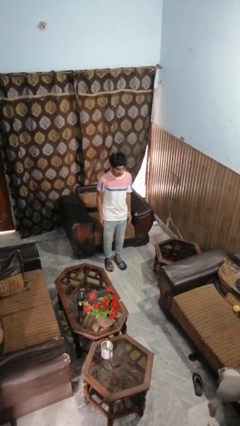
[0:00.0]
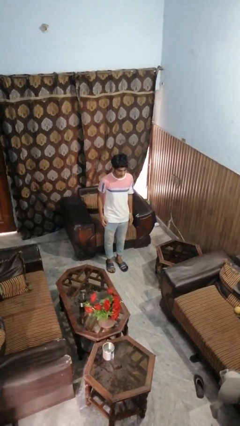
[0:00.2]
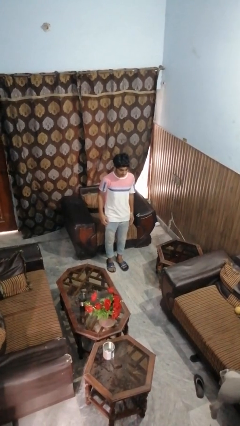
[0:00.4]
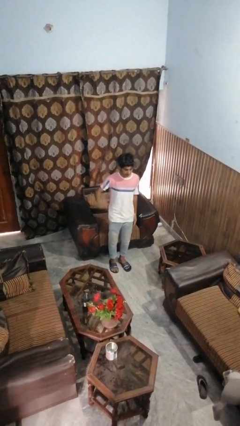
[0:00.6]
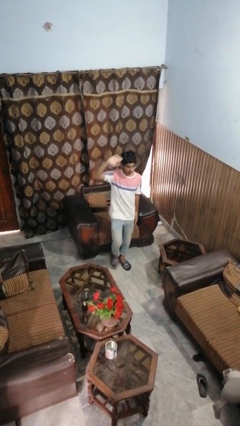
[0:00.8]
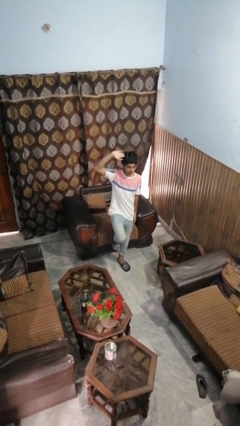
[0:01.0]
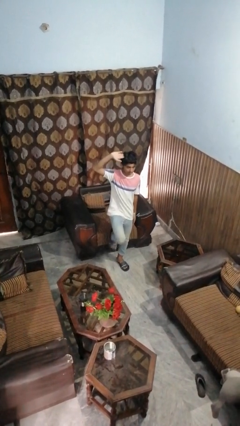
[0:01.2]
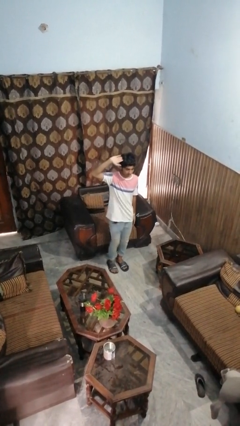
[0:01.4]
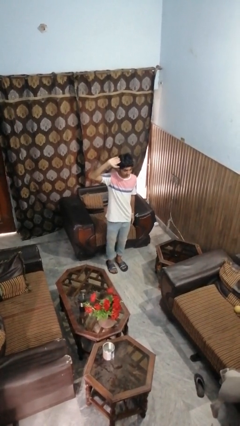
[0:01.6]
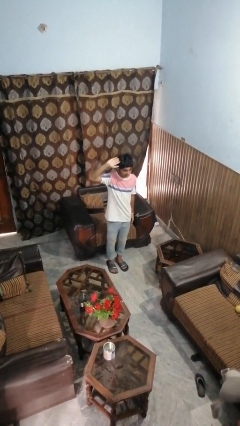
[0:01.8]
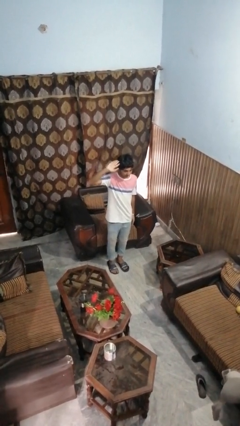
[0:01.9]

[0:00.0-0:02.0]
person salutes

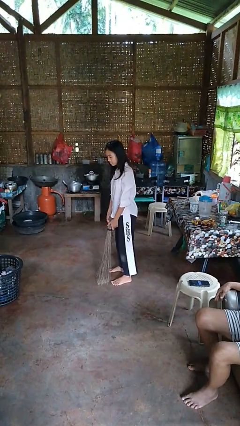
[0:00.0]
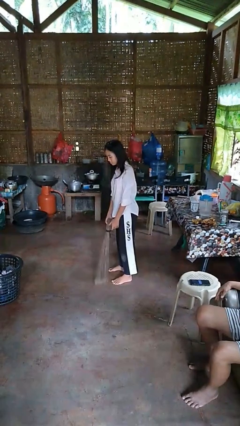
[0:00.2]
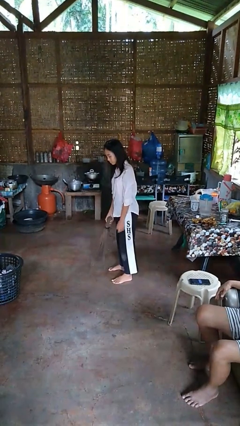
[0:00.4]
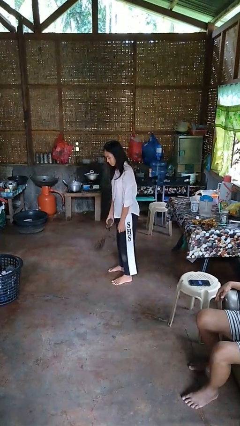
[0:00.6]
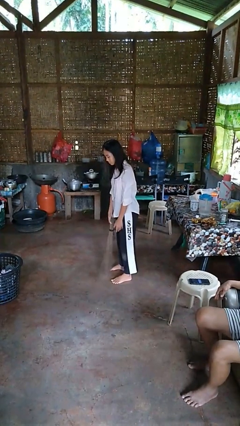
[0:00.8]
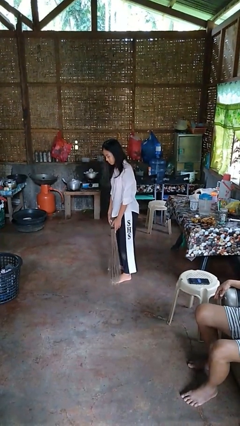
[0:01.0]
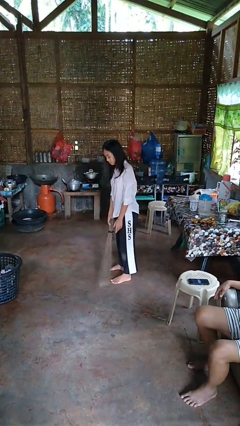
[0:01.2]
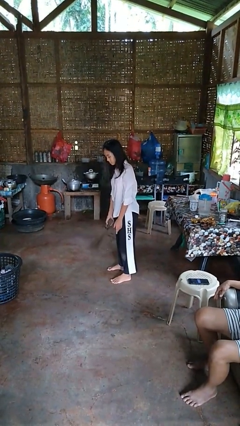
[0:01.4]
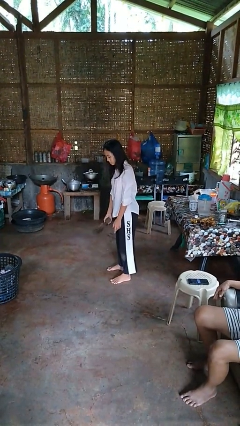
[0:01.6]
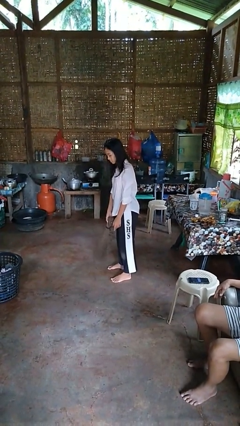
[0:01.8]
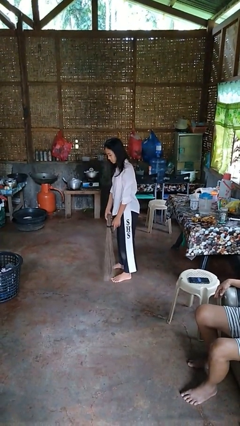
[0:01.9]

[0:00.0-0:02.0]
person sweeps floor

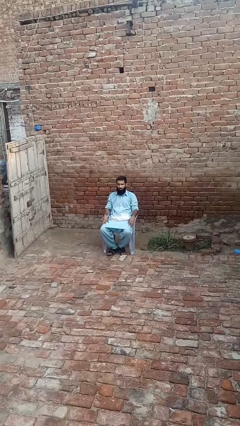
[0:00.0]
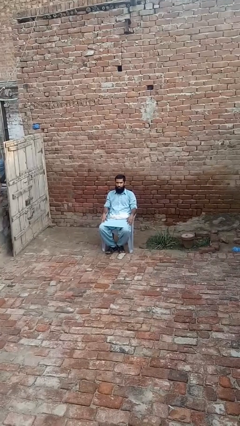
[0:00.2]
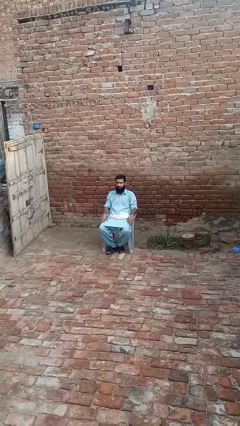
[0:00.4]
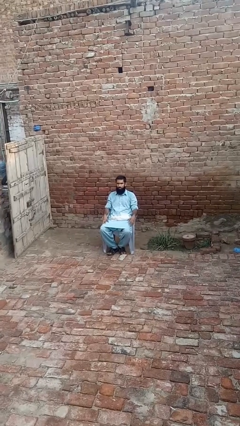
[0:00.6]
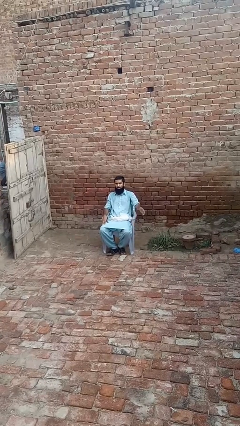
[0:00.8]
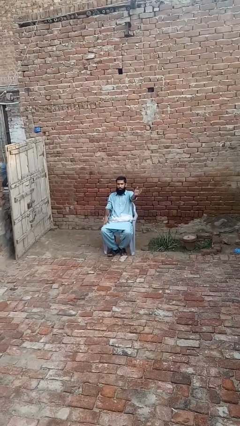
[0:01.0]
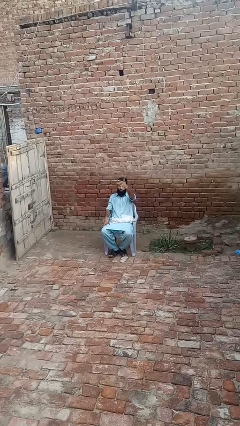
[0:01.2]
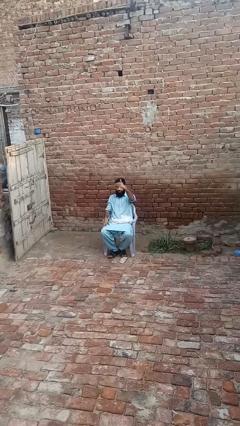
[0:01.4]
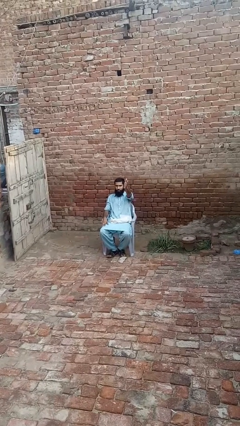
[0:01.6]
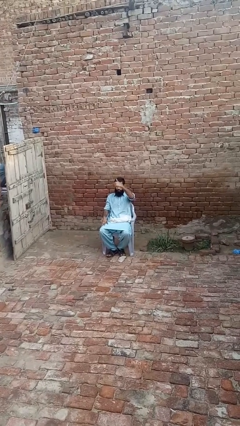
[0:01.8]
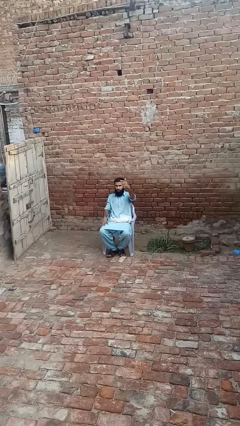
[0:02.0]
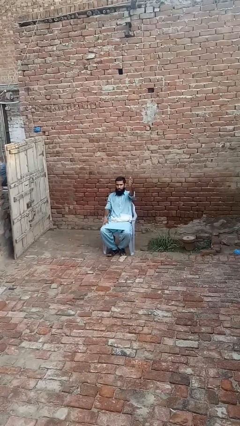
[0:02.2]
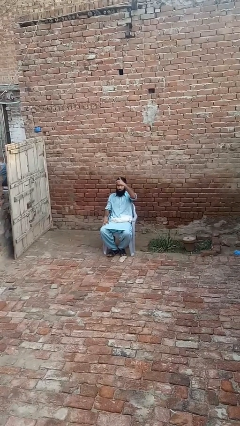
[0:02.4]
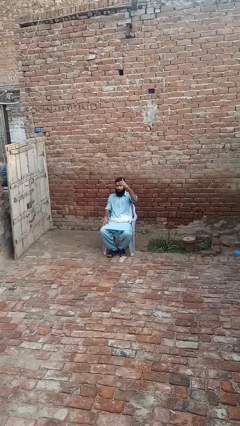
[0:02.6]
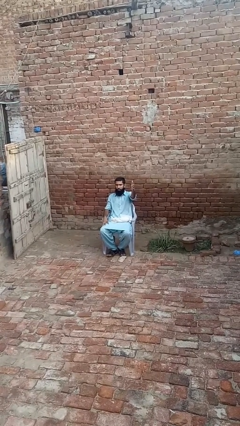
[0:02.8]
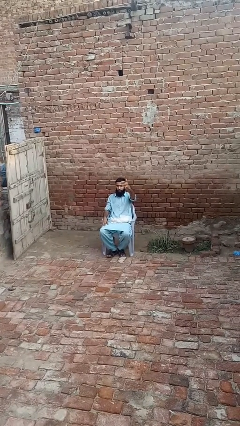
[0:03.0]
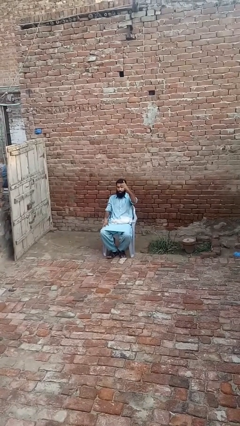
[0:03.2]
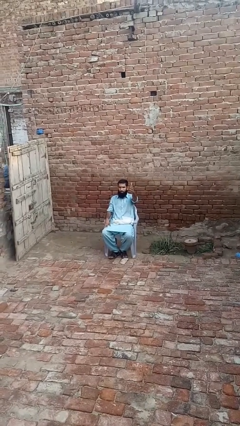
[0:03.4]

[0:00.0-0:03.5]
person gestures come here

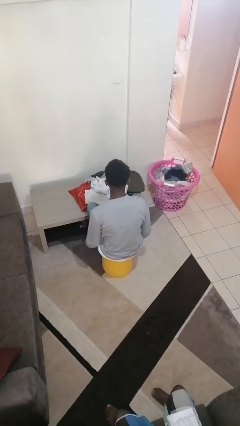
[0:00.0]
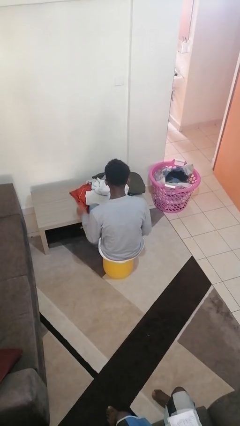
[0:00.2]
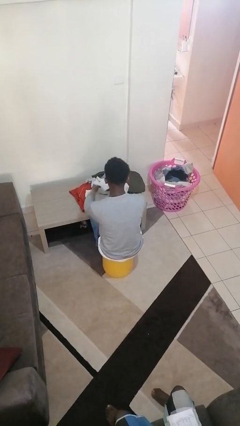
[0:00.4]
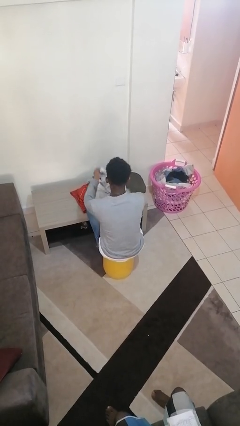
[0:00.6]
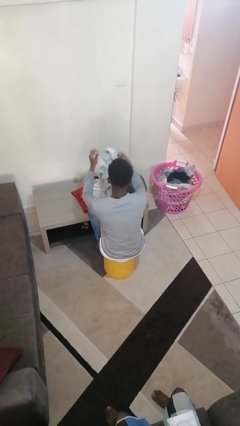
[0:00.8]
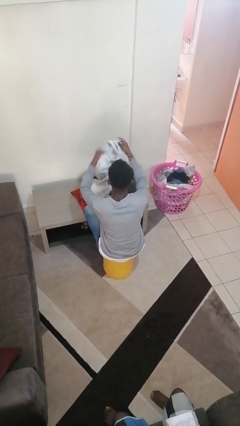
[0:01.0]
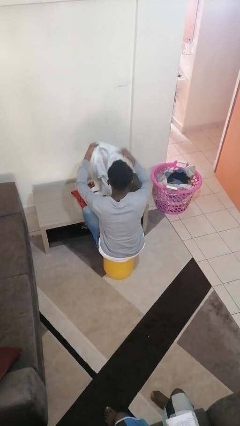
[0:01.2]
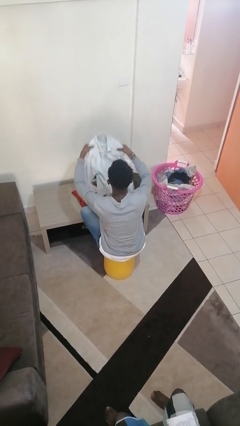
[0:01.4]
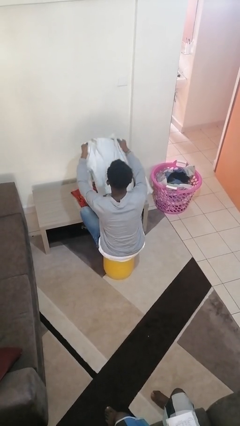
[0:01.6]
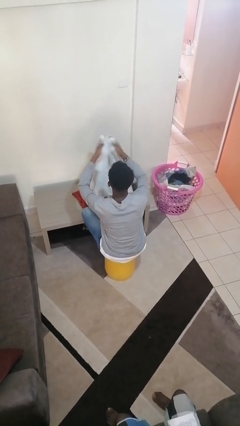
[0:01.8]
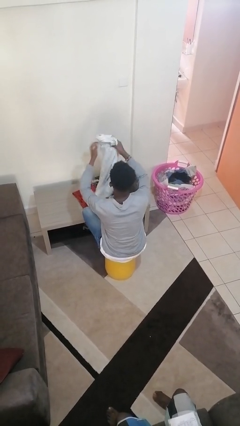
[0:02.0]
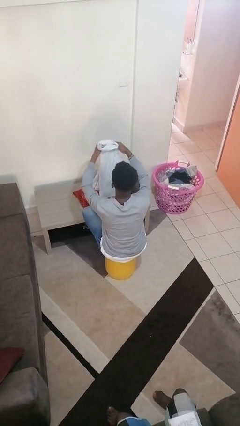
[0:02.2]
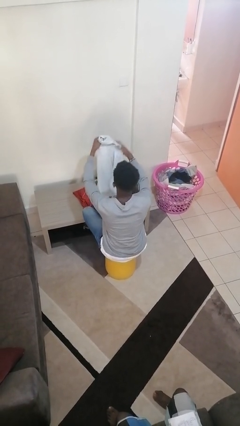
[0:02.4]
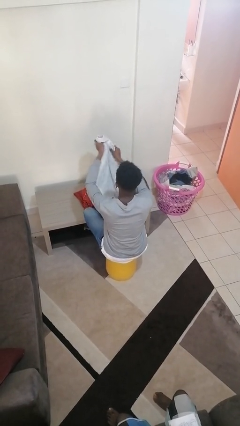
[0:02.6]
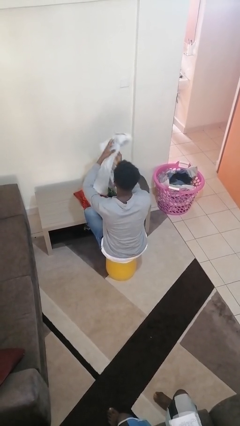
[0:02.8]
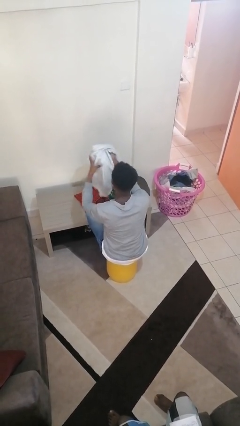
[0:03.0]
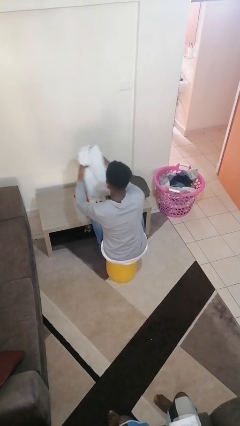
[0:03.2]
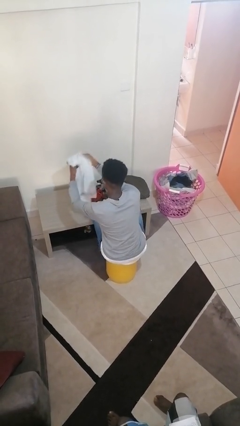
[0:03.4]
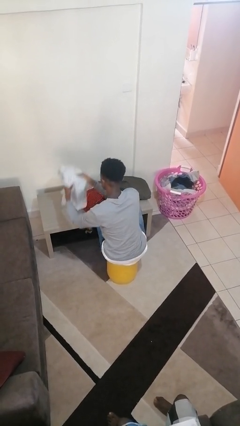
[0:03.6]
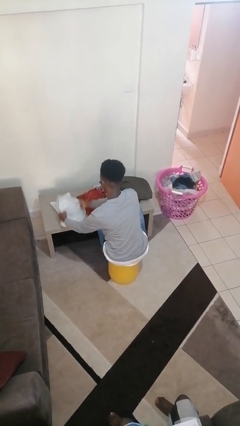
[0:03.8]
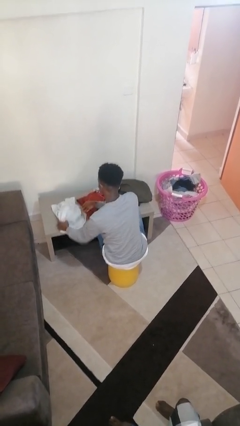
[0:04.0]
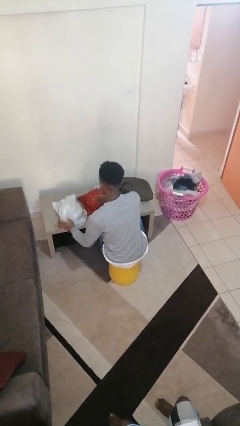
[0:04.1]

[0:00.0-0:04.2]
person folds shirt

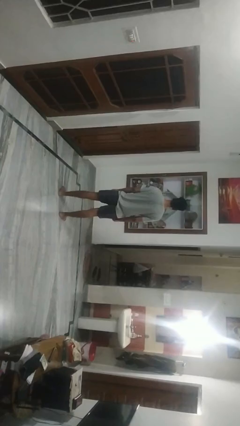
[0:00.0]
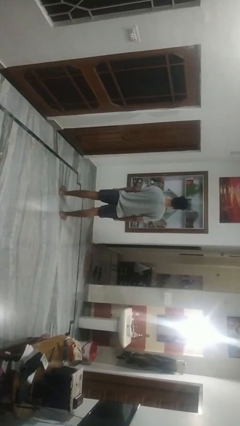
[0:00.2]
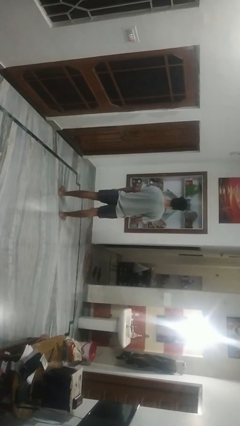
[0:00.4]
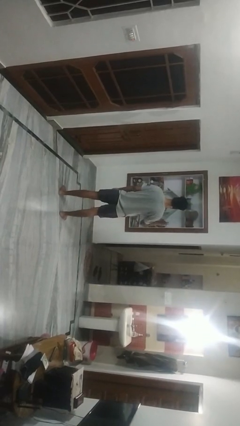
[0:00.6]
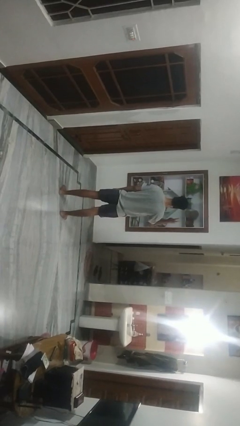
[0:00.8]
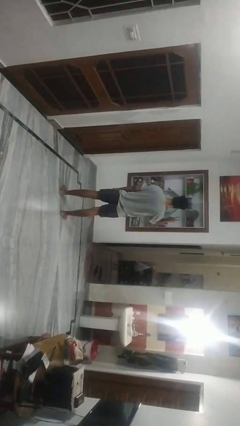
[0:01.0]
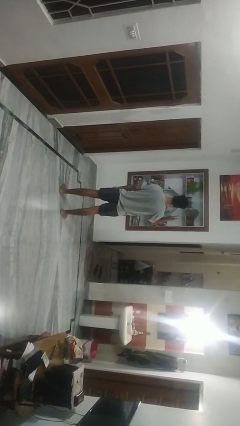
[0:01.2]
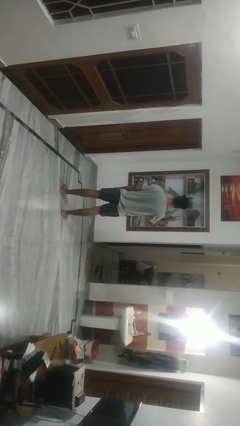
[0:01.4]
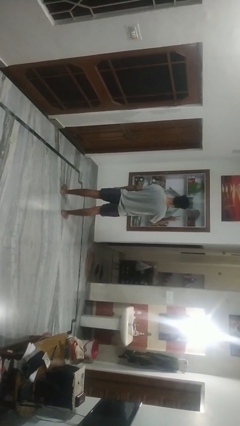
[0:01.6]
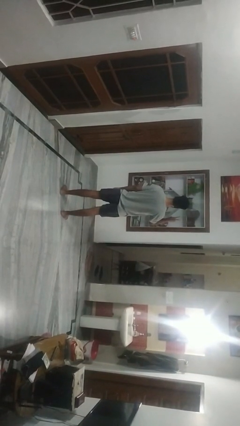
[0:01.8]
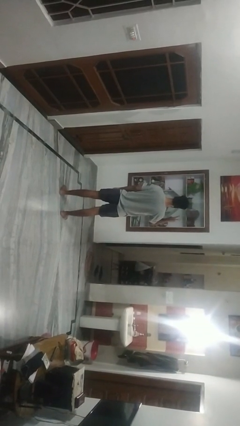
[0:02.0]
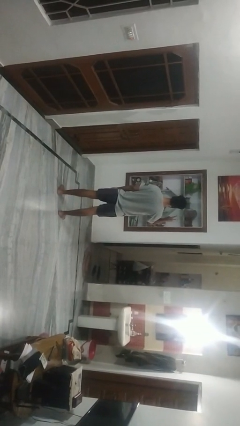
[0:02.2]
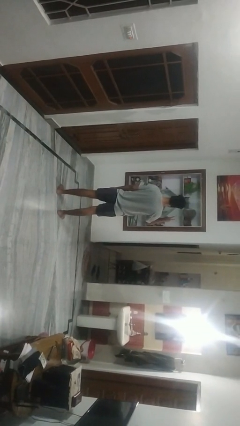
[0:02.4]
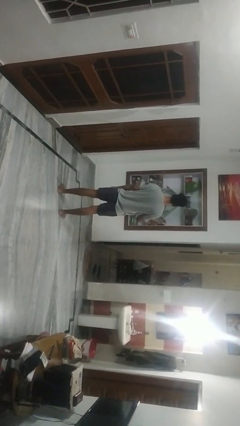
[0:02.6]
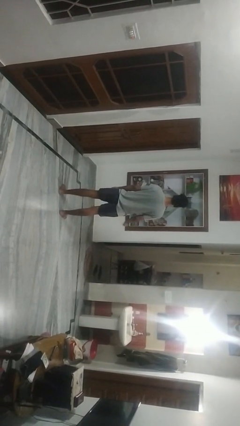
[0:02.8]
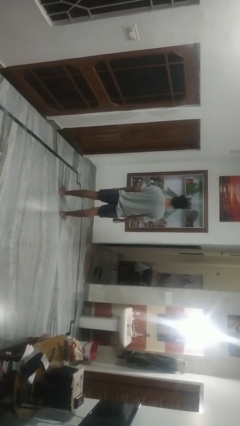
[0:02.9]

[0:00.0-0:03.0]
person gestures peace

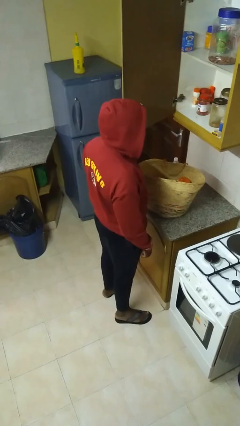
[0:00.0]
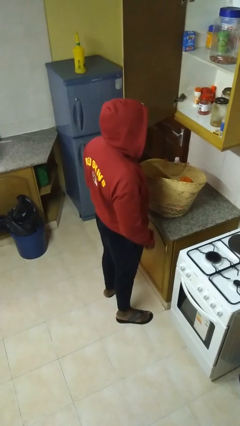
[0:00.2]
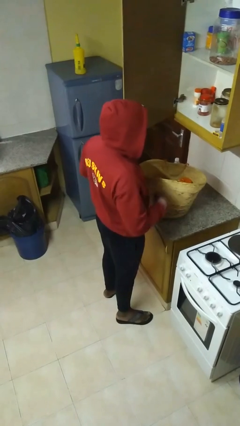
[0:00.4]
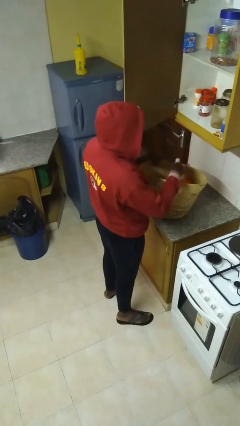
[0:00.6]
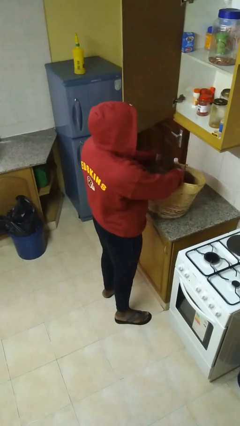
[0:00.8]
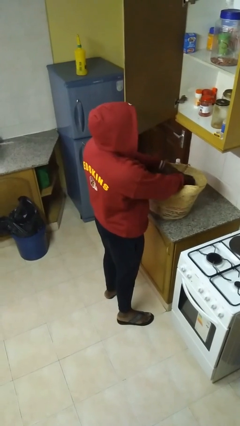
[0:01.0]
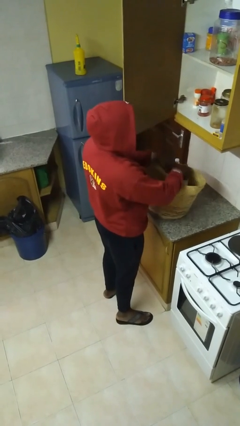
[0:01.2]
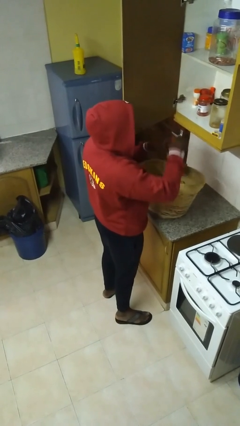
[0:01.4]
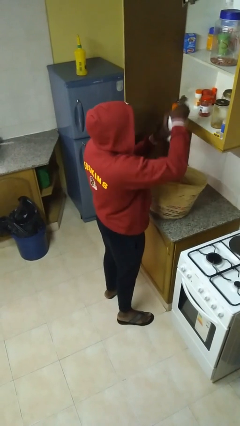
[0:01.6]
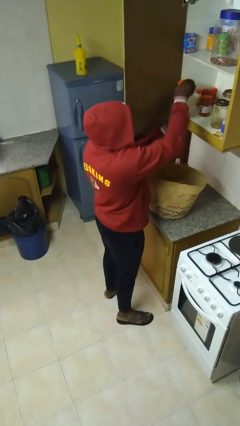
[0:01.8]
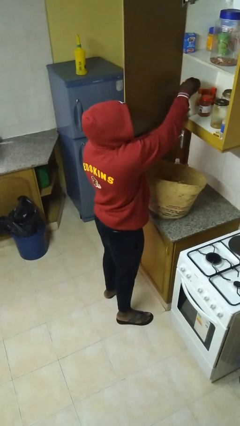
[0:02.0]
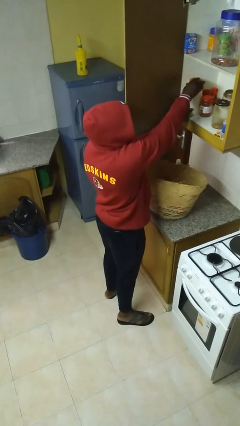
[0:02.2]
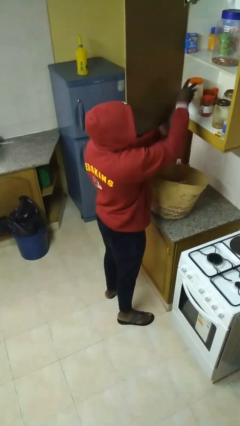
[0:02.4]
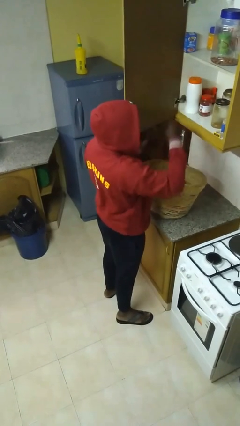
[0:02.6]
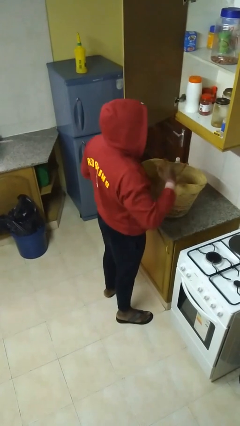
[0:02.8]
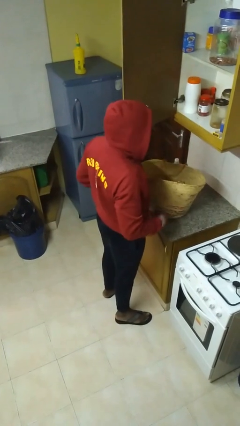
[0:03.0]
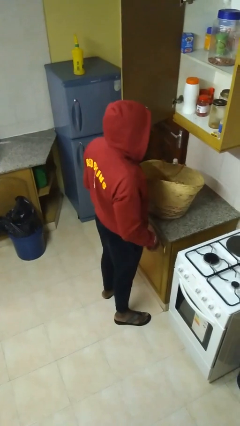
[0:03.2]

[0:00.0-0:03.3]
person loads groceries into cabinet
